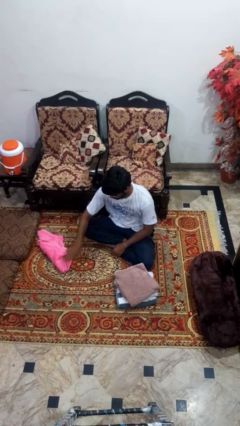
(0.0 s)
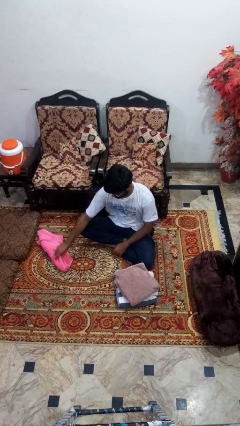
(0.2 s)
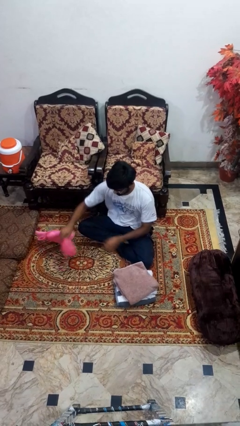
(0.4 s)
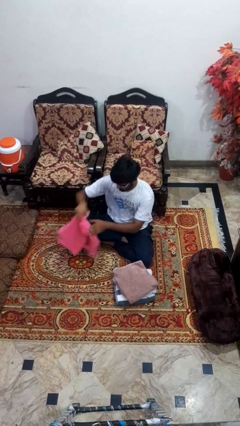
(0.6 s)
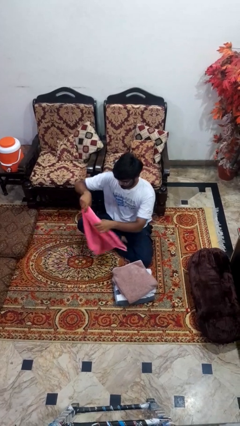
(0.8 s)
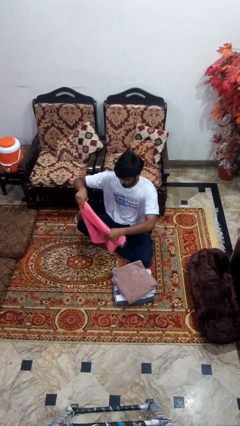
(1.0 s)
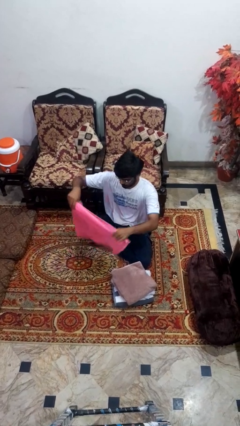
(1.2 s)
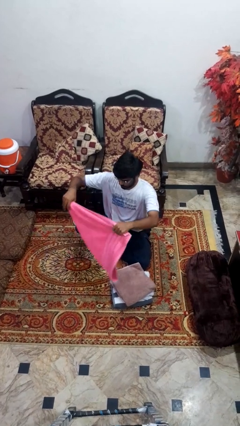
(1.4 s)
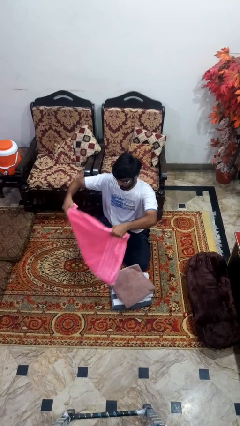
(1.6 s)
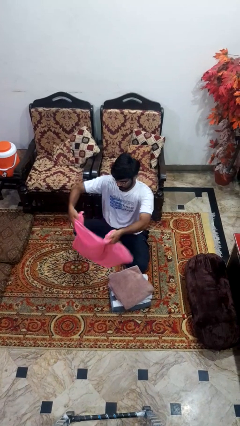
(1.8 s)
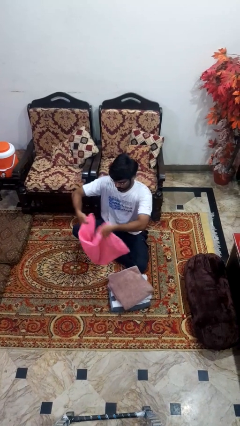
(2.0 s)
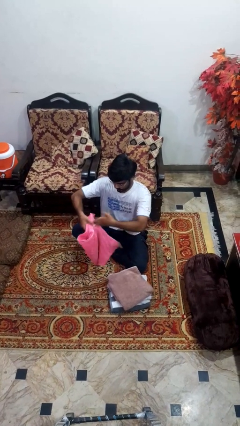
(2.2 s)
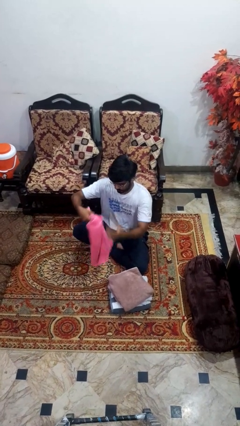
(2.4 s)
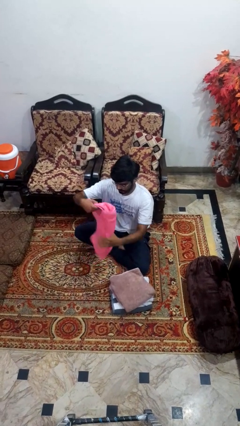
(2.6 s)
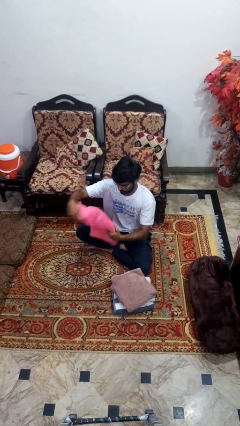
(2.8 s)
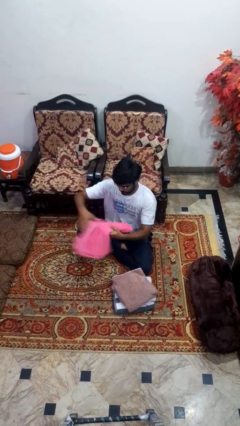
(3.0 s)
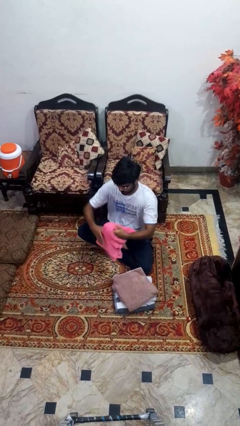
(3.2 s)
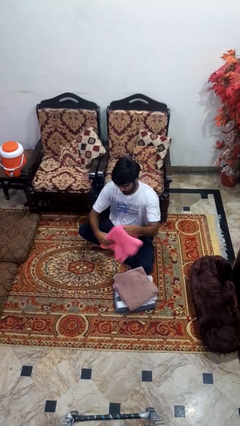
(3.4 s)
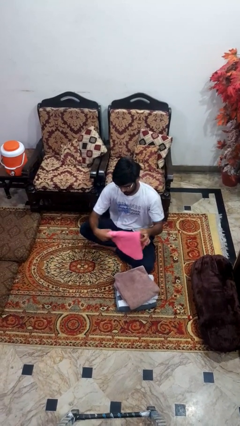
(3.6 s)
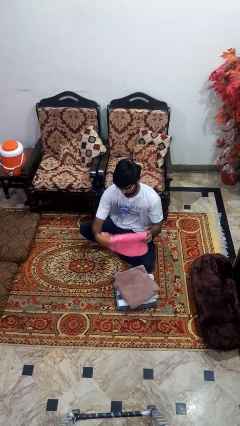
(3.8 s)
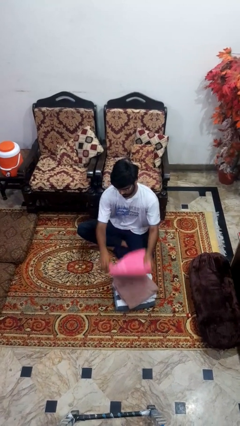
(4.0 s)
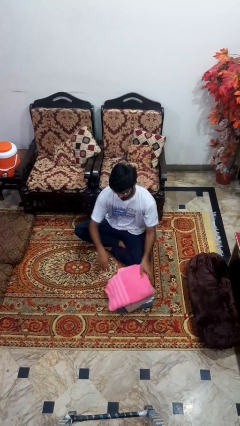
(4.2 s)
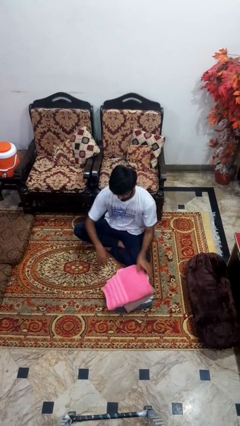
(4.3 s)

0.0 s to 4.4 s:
person folds towel

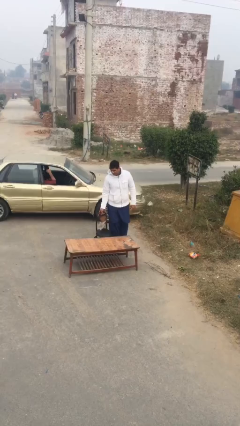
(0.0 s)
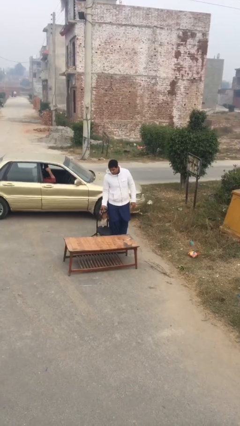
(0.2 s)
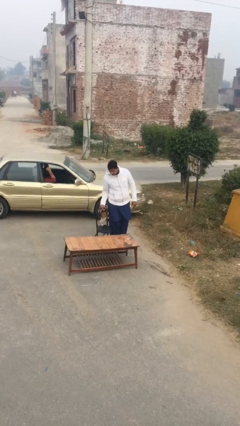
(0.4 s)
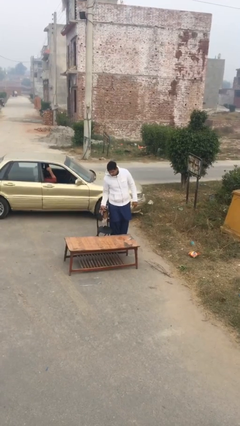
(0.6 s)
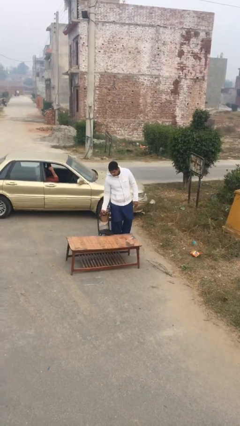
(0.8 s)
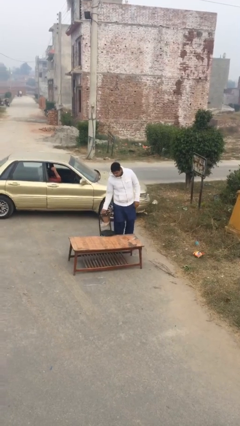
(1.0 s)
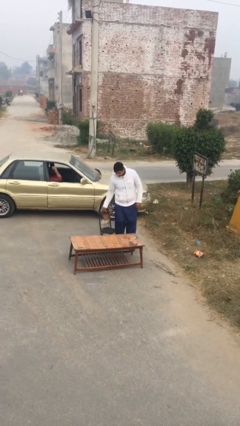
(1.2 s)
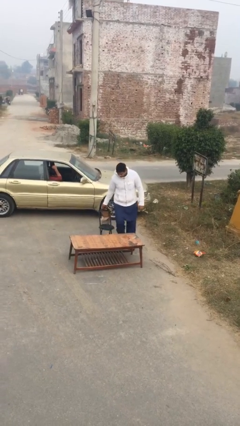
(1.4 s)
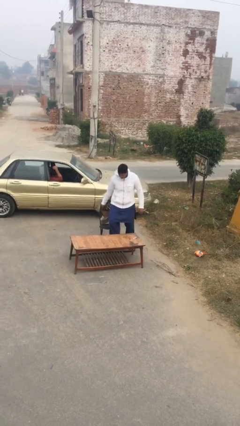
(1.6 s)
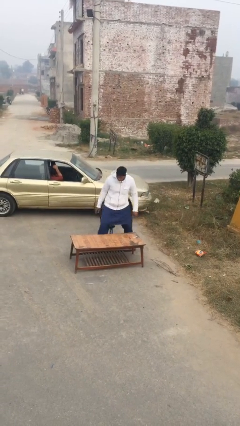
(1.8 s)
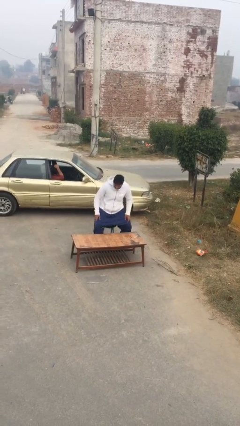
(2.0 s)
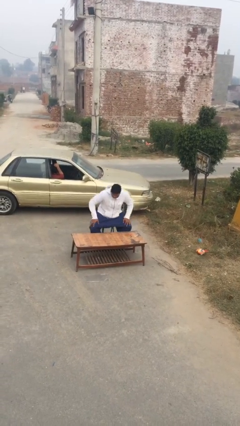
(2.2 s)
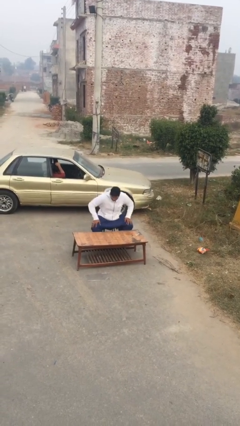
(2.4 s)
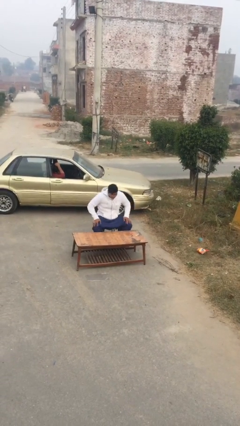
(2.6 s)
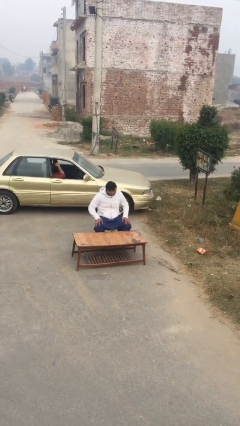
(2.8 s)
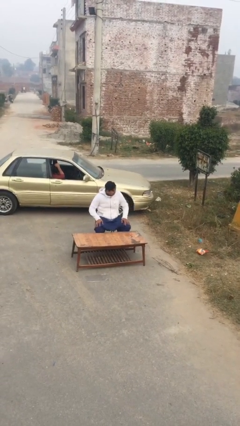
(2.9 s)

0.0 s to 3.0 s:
person sits down

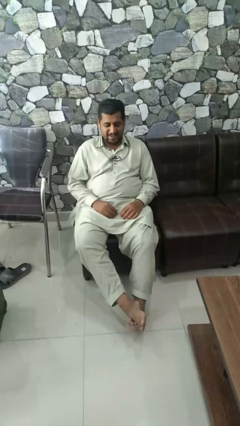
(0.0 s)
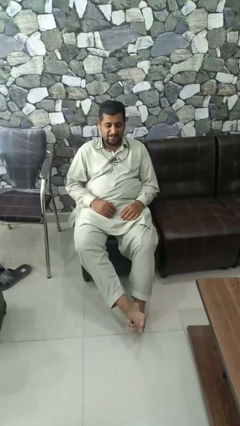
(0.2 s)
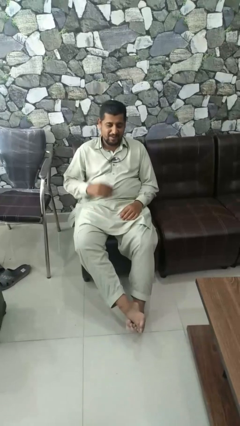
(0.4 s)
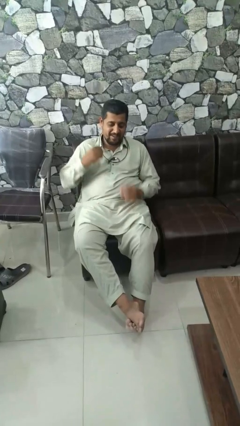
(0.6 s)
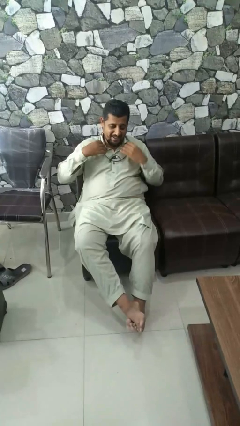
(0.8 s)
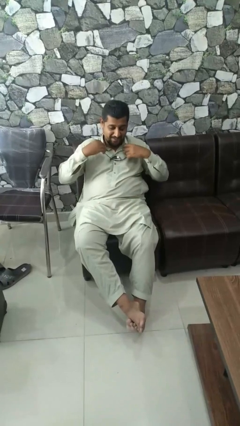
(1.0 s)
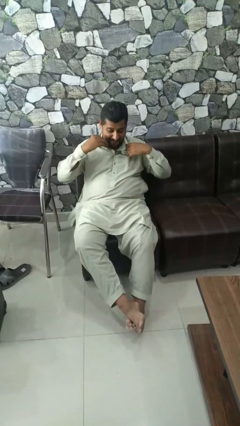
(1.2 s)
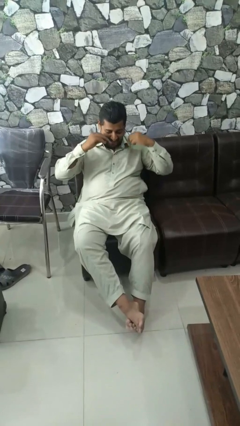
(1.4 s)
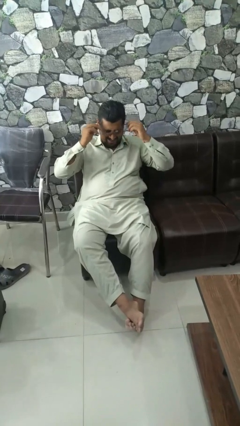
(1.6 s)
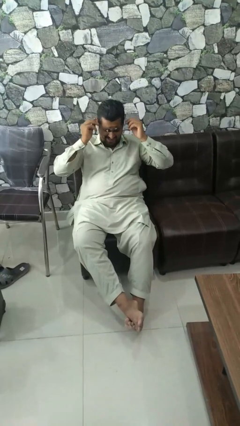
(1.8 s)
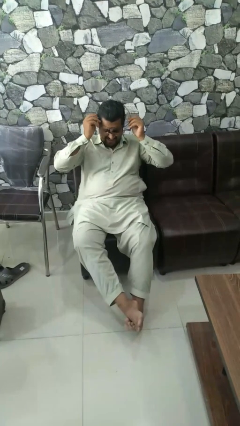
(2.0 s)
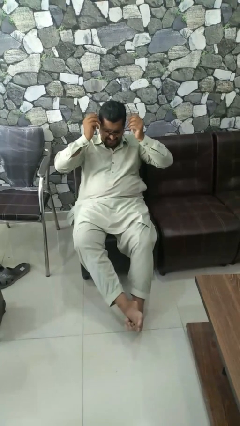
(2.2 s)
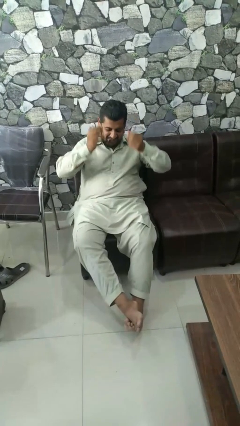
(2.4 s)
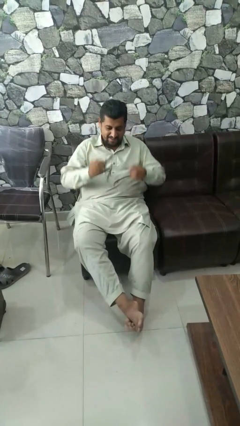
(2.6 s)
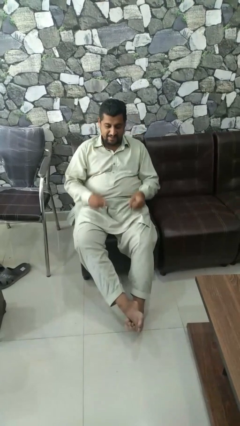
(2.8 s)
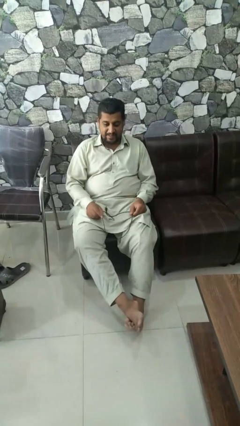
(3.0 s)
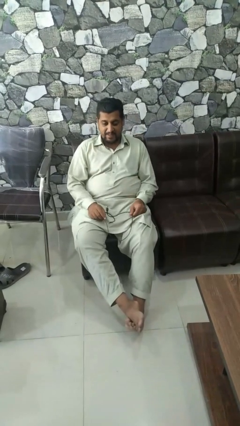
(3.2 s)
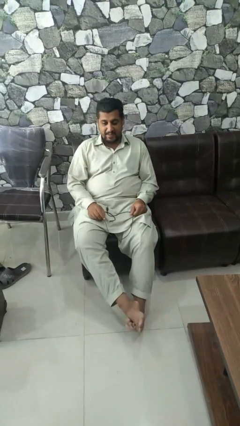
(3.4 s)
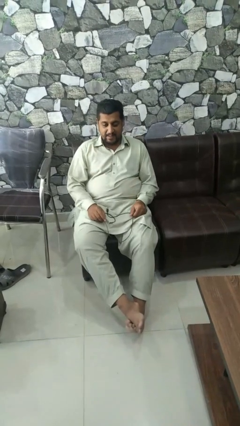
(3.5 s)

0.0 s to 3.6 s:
person takes off necklace

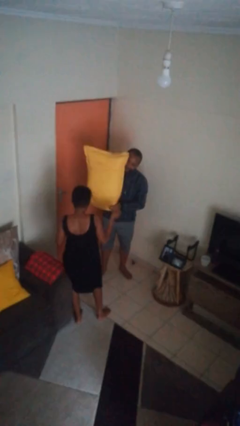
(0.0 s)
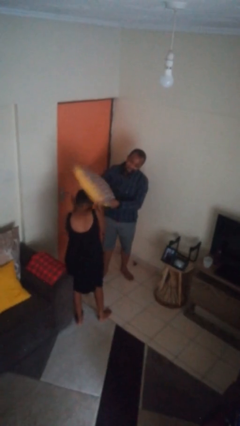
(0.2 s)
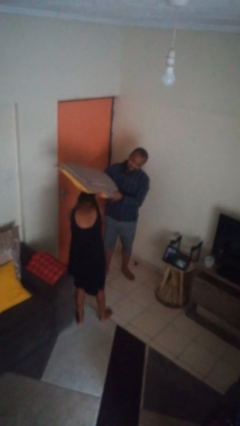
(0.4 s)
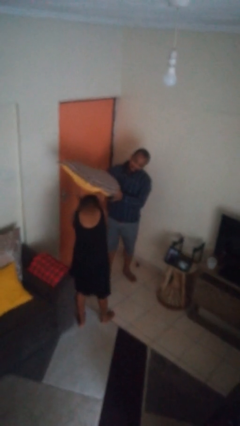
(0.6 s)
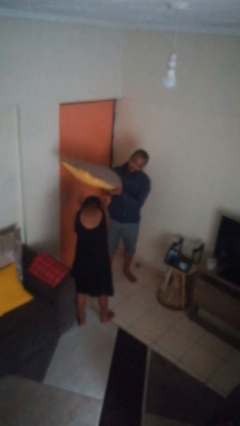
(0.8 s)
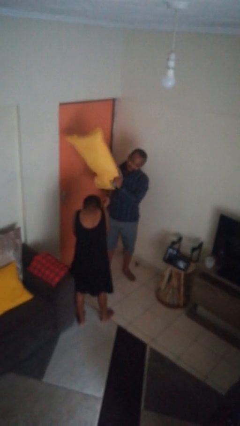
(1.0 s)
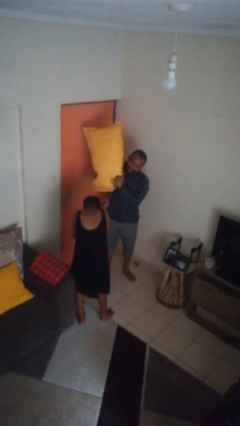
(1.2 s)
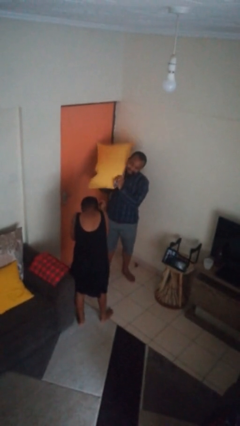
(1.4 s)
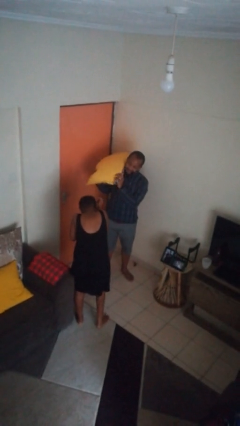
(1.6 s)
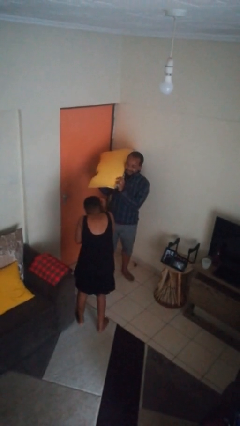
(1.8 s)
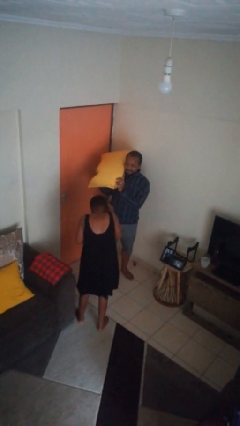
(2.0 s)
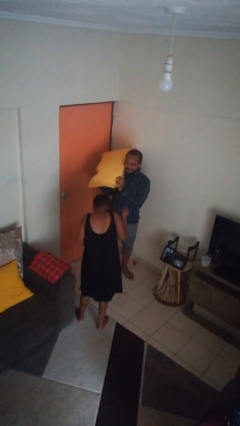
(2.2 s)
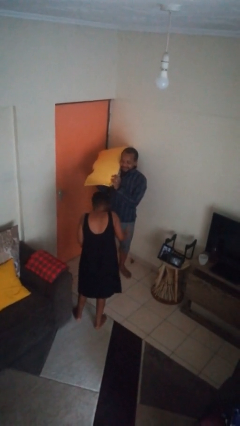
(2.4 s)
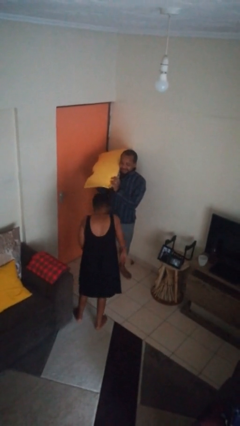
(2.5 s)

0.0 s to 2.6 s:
person hits person with pillow

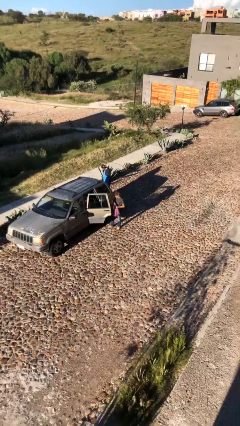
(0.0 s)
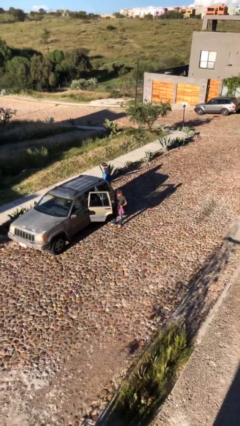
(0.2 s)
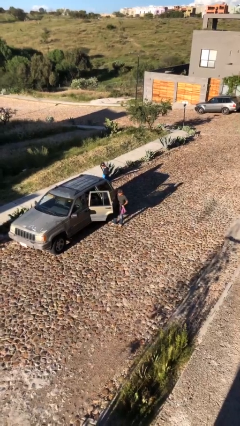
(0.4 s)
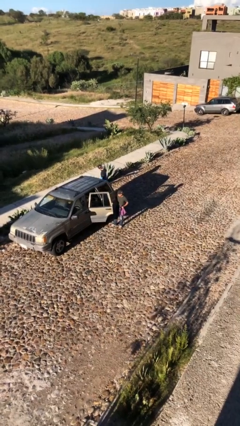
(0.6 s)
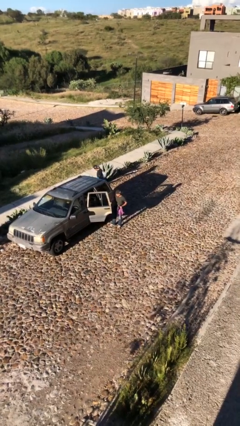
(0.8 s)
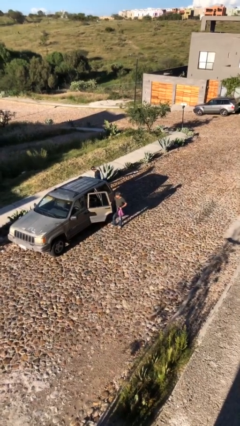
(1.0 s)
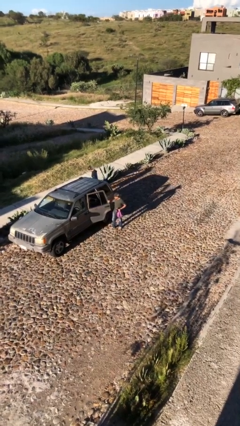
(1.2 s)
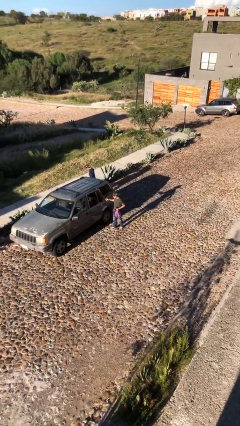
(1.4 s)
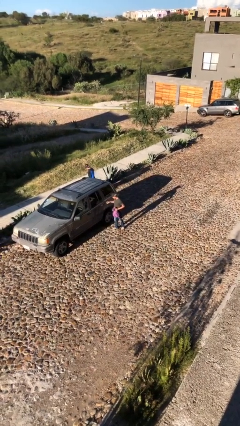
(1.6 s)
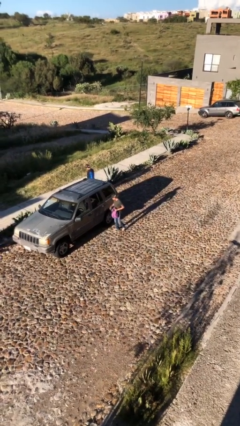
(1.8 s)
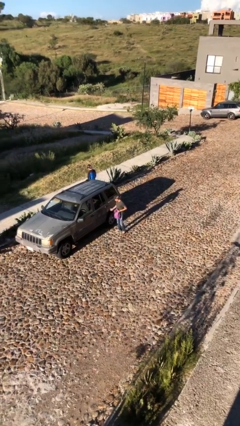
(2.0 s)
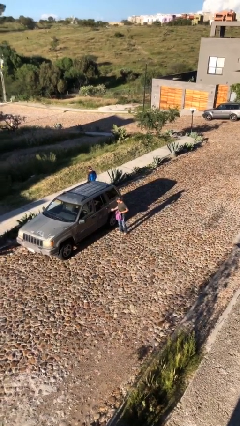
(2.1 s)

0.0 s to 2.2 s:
person closes car door

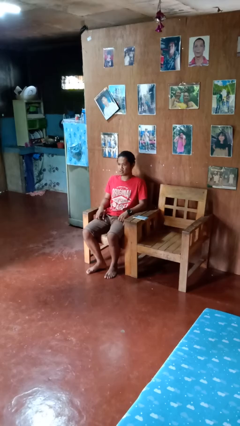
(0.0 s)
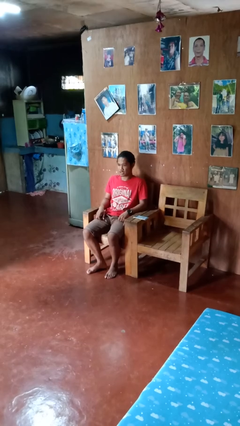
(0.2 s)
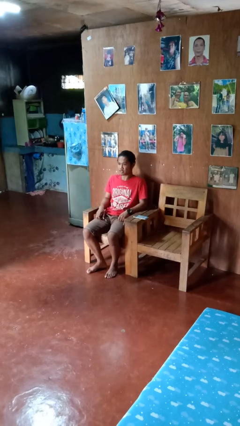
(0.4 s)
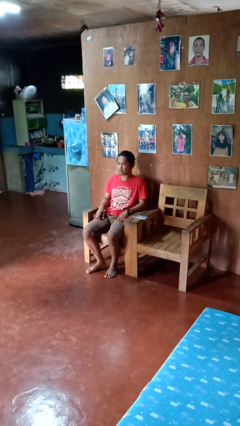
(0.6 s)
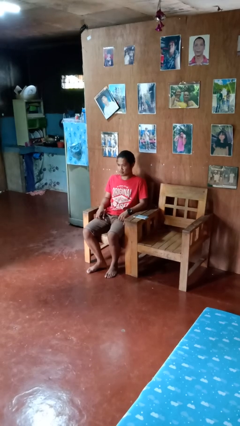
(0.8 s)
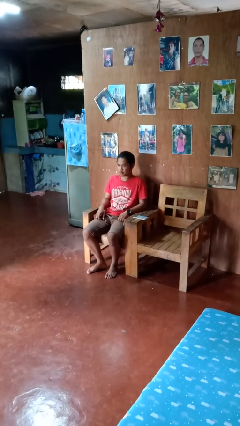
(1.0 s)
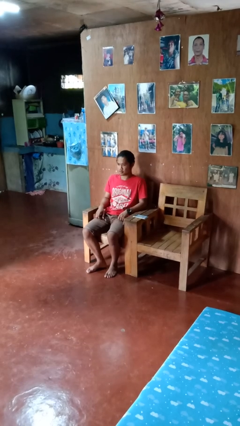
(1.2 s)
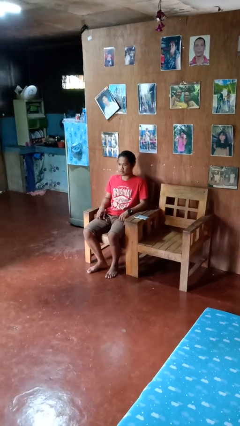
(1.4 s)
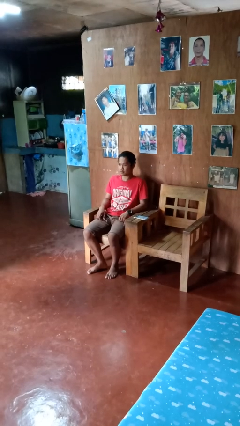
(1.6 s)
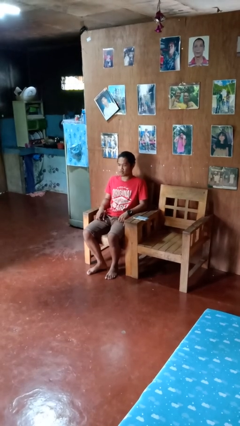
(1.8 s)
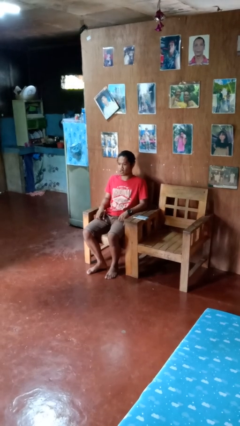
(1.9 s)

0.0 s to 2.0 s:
person nods head
